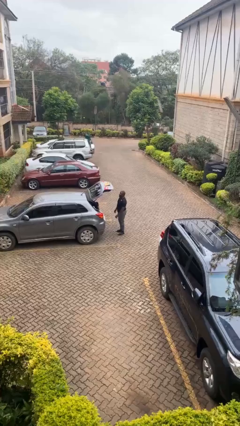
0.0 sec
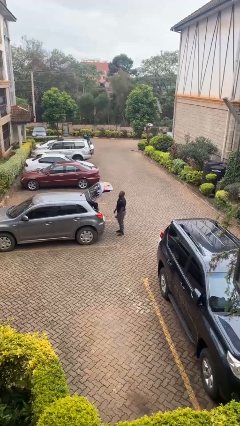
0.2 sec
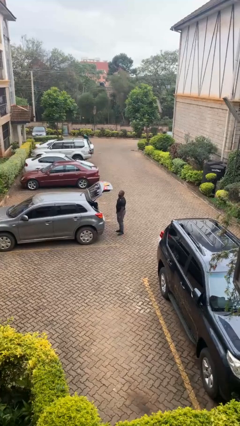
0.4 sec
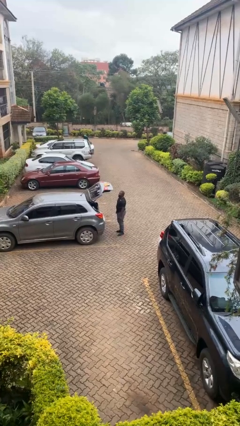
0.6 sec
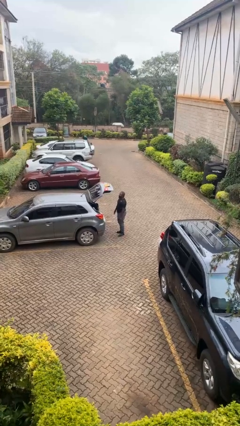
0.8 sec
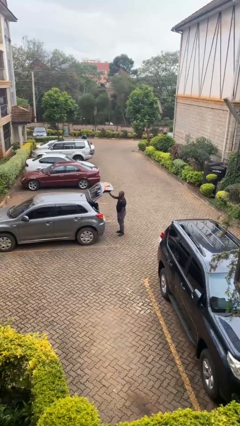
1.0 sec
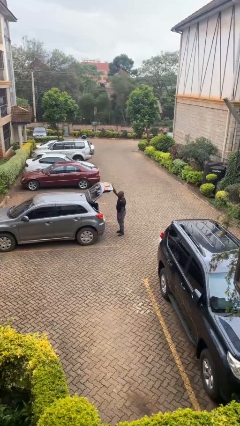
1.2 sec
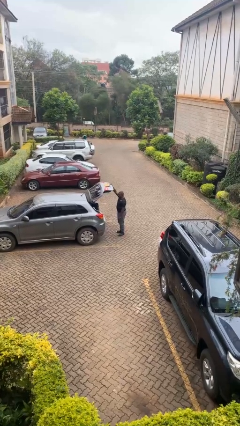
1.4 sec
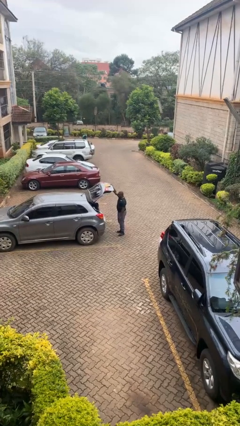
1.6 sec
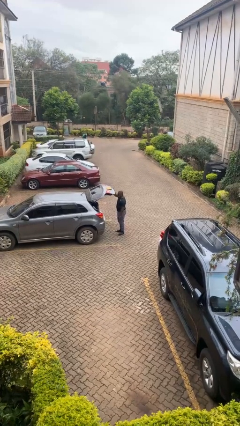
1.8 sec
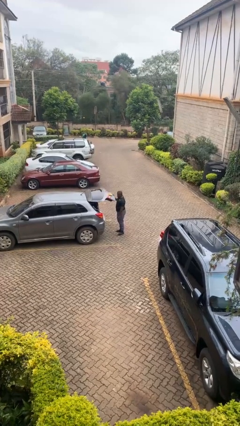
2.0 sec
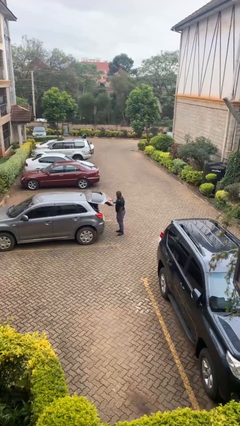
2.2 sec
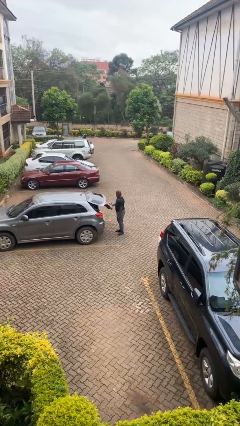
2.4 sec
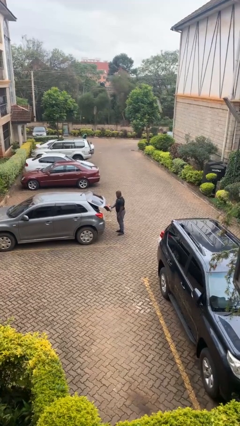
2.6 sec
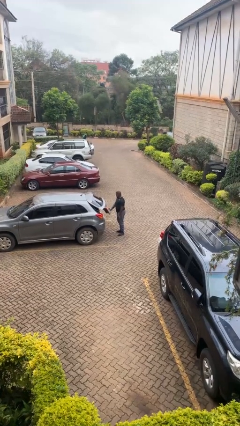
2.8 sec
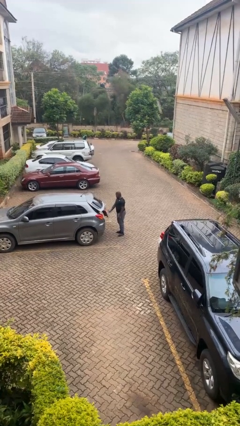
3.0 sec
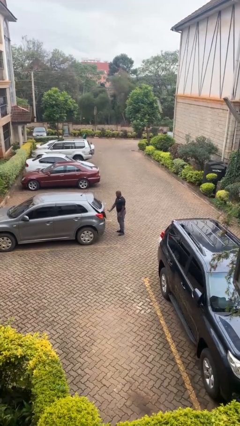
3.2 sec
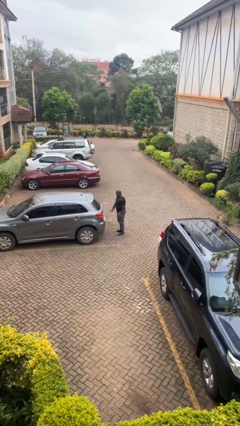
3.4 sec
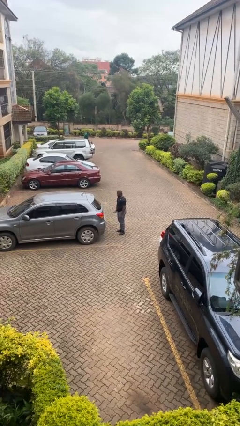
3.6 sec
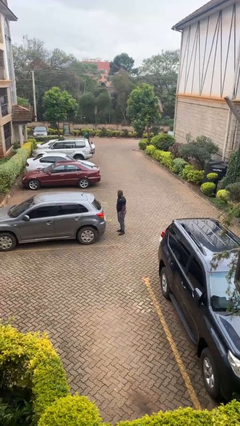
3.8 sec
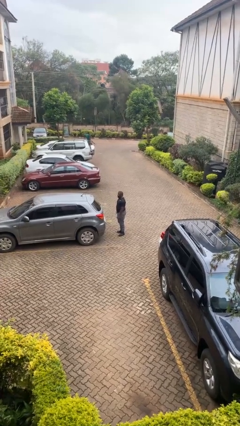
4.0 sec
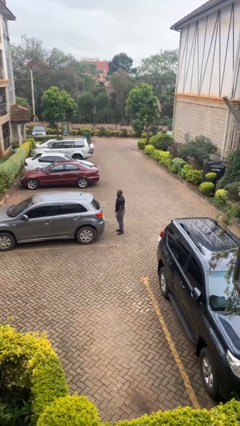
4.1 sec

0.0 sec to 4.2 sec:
person closes car trunk

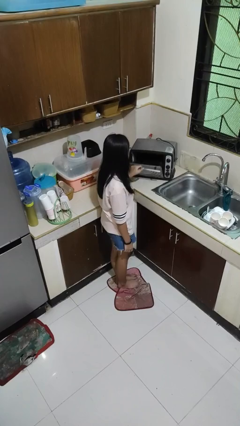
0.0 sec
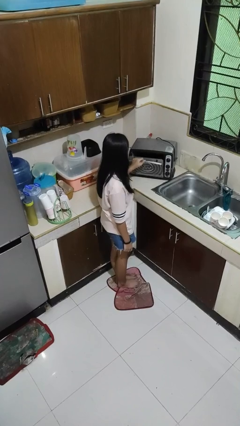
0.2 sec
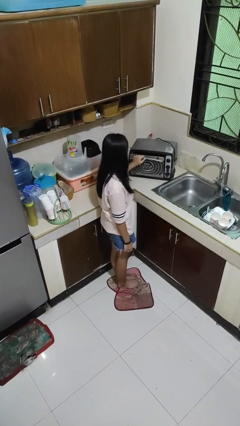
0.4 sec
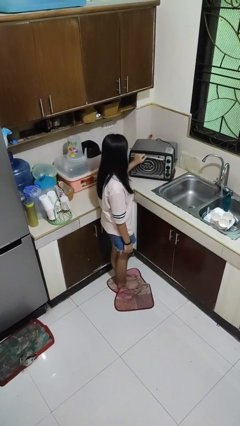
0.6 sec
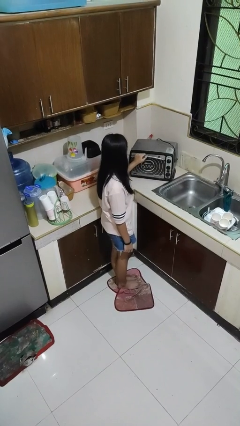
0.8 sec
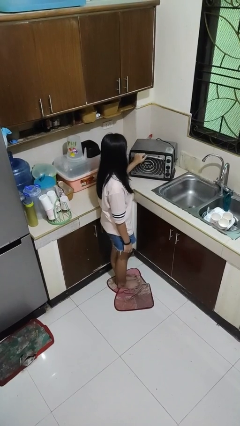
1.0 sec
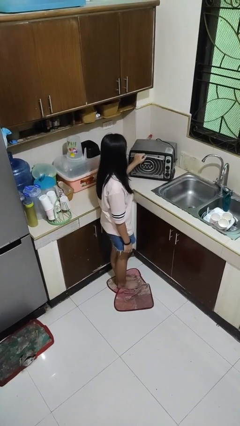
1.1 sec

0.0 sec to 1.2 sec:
person closes microwave

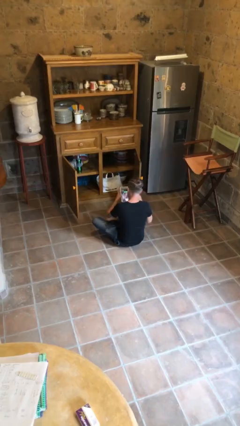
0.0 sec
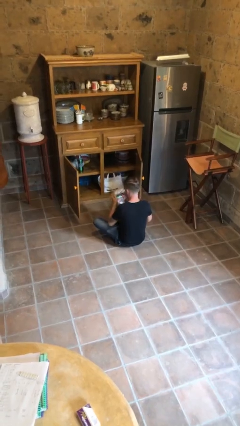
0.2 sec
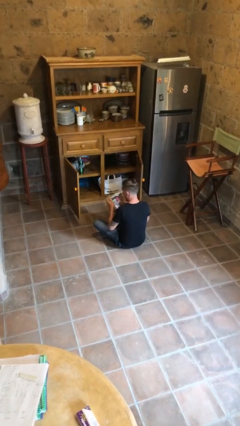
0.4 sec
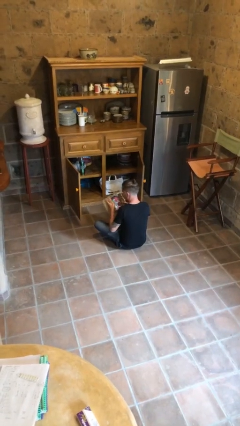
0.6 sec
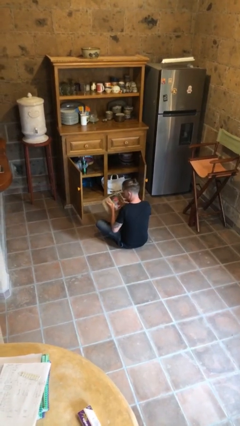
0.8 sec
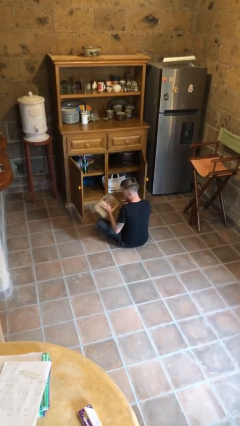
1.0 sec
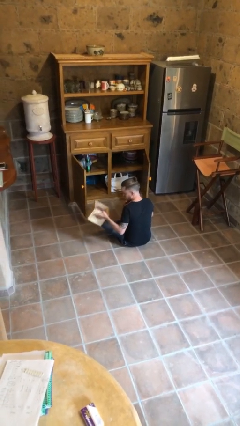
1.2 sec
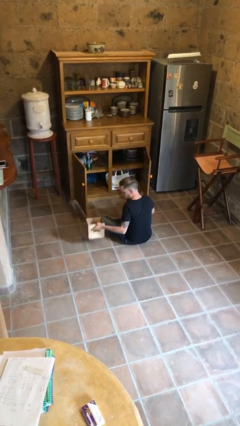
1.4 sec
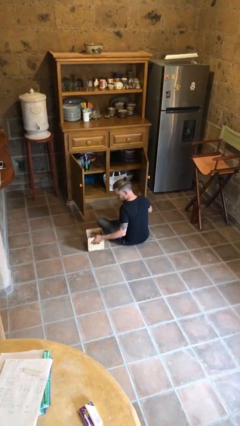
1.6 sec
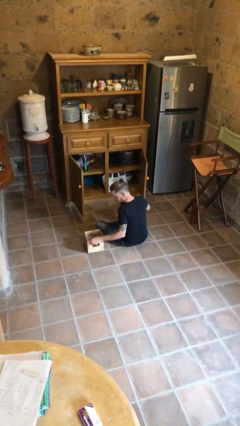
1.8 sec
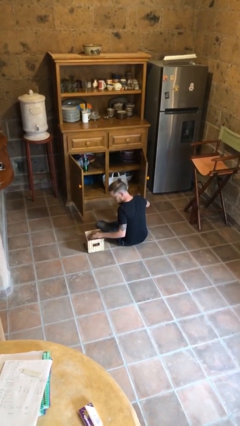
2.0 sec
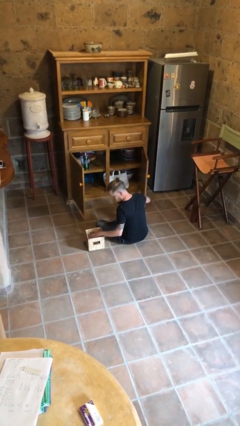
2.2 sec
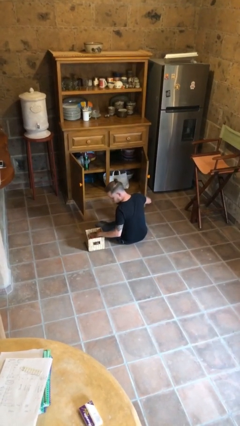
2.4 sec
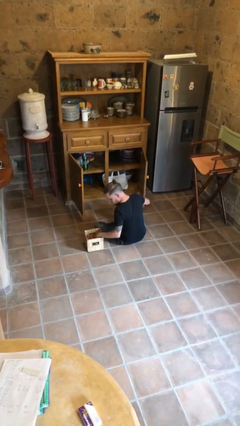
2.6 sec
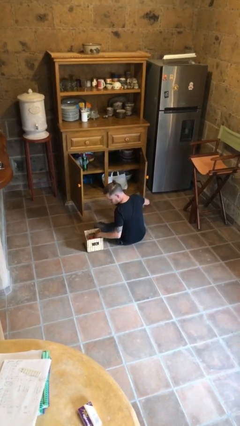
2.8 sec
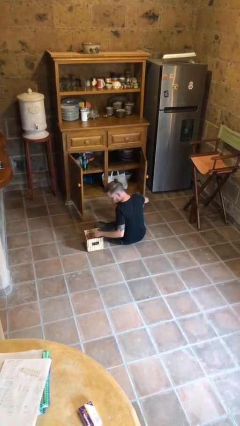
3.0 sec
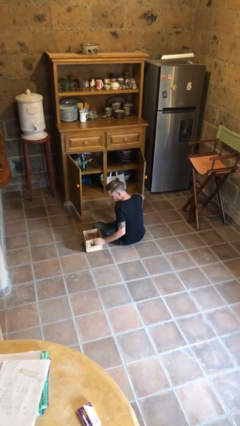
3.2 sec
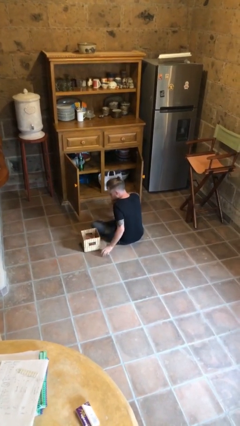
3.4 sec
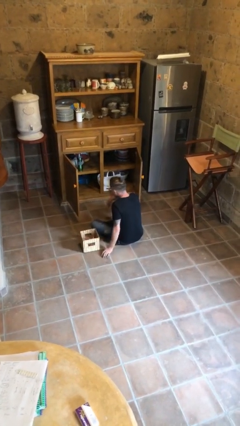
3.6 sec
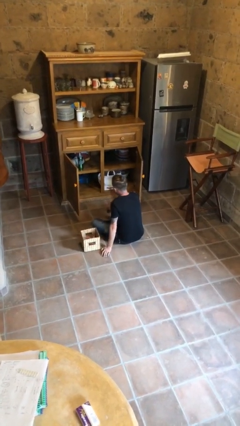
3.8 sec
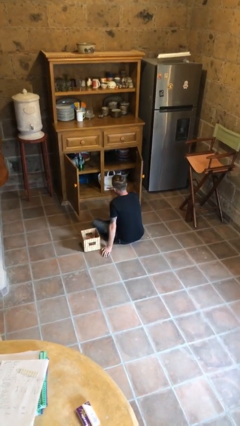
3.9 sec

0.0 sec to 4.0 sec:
person puts down object on floor

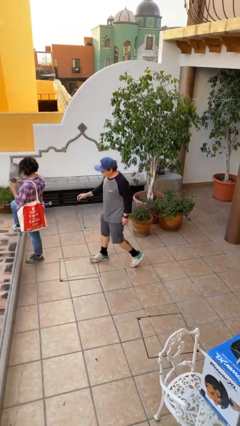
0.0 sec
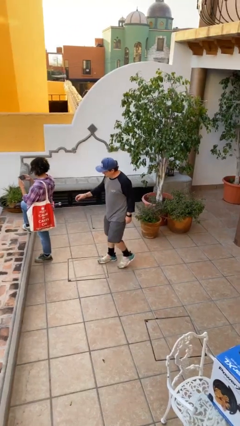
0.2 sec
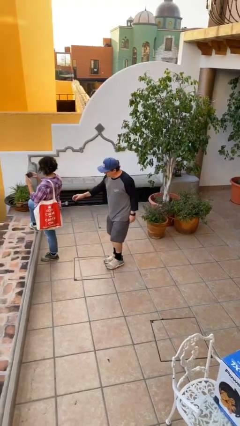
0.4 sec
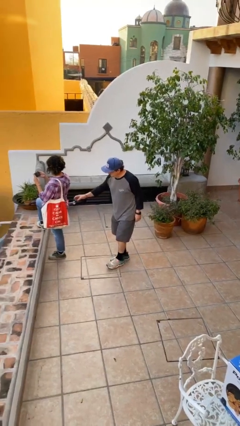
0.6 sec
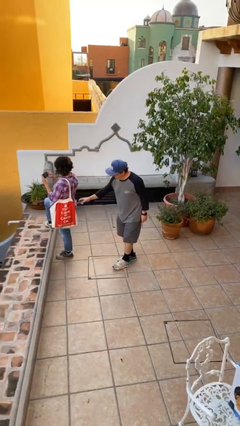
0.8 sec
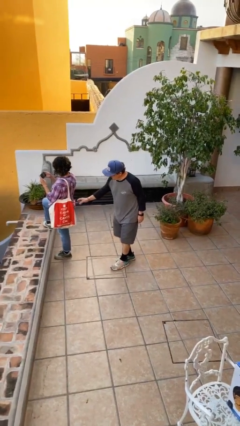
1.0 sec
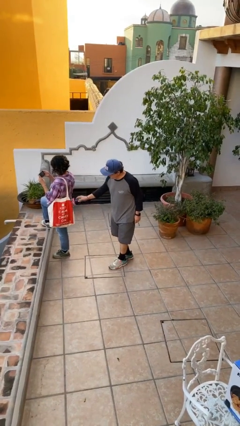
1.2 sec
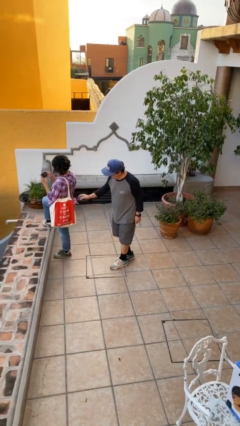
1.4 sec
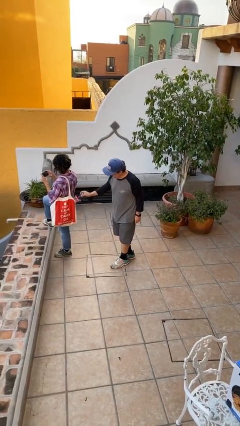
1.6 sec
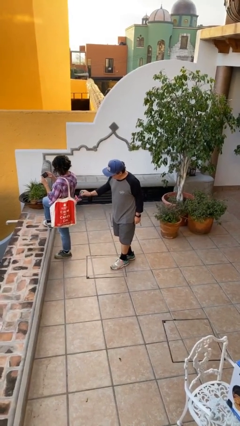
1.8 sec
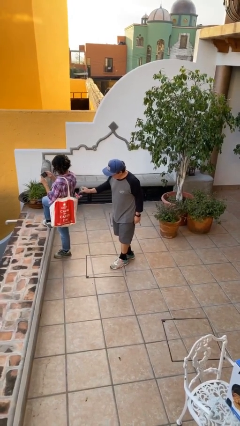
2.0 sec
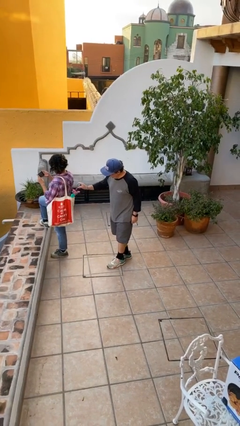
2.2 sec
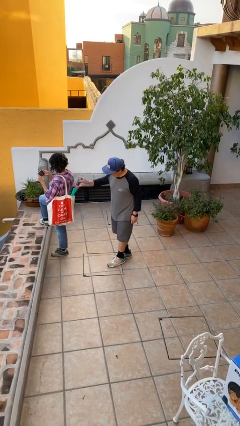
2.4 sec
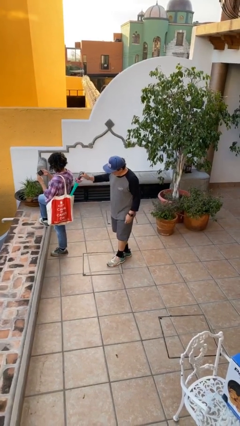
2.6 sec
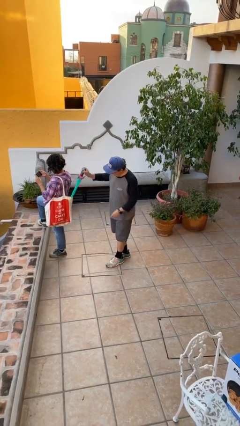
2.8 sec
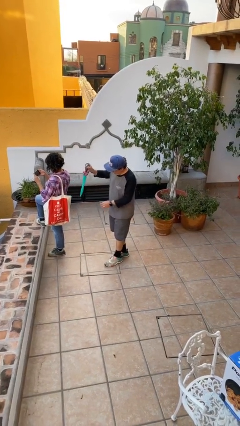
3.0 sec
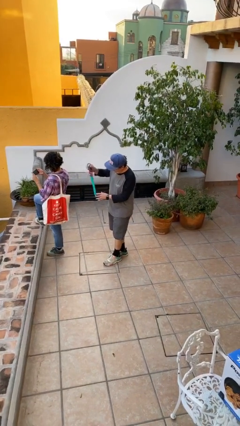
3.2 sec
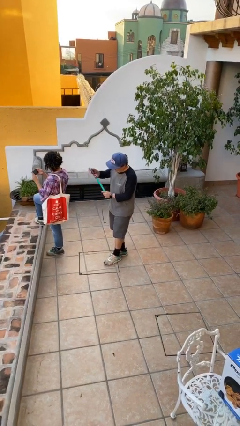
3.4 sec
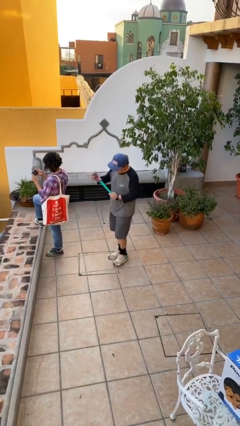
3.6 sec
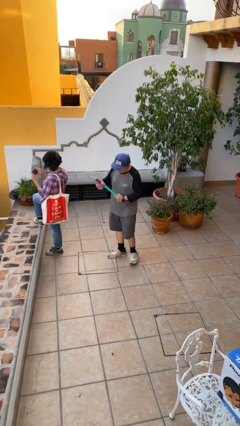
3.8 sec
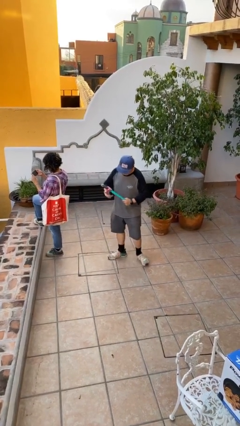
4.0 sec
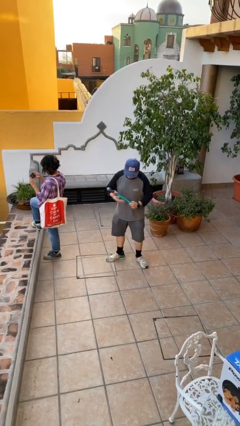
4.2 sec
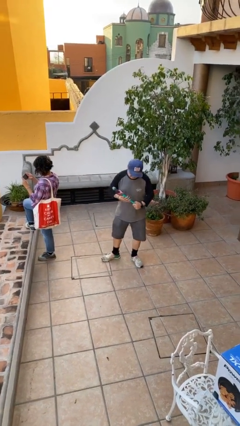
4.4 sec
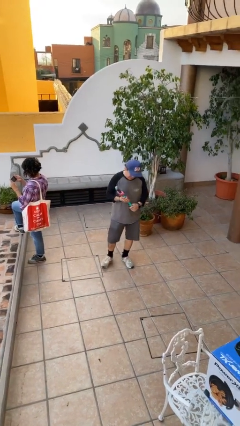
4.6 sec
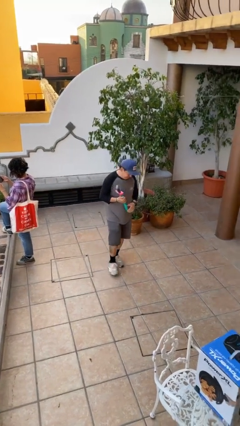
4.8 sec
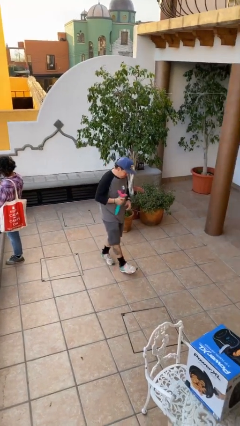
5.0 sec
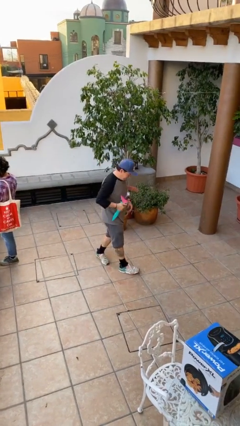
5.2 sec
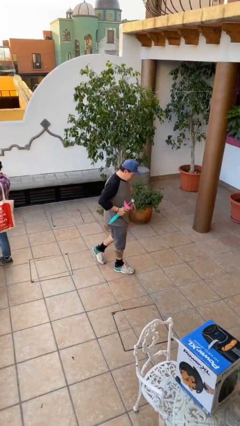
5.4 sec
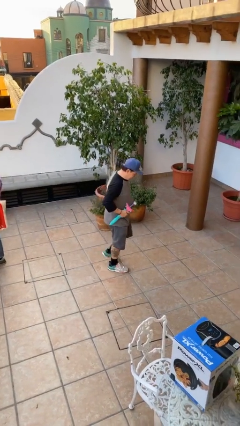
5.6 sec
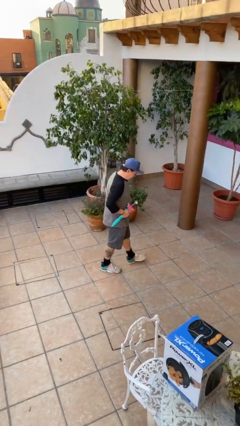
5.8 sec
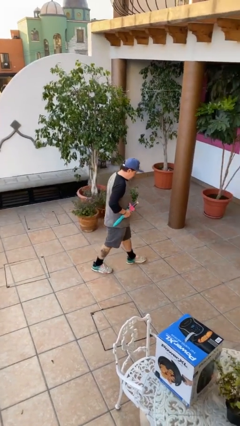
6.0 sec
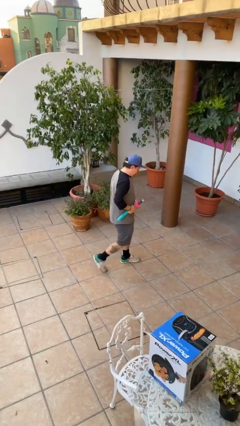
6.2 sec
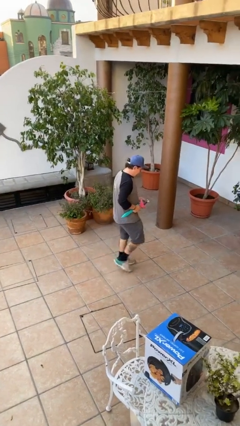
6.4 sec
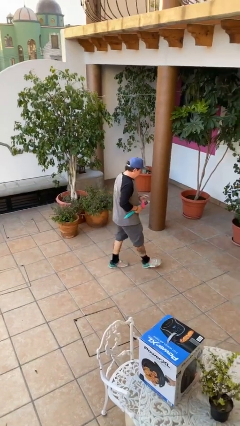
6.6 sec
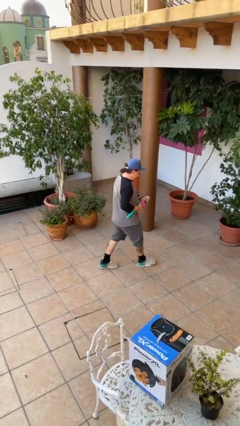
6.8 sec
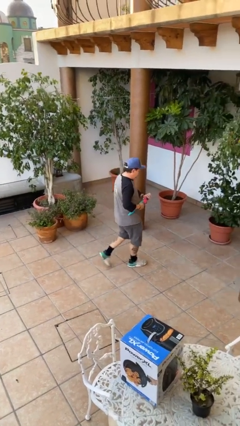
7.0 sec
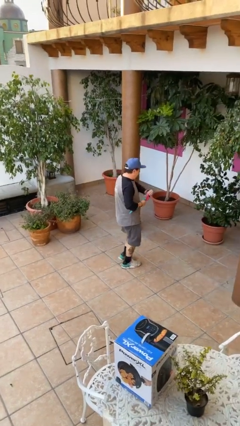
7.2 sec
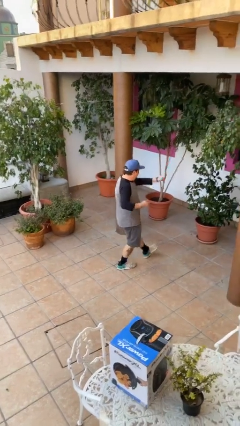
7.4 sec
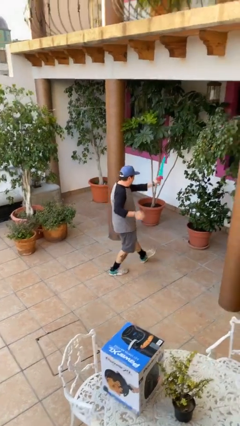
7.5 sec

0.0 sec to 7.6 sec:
person steals object from person

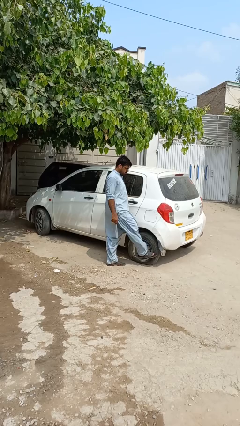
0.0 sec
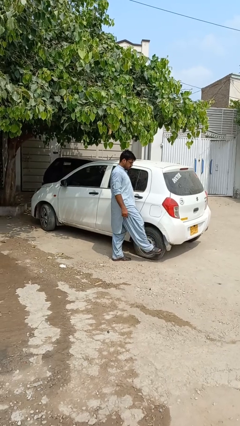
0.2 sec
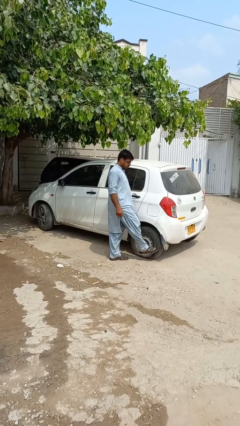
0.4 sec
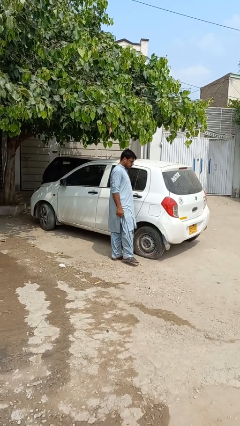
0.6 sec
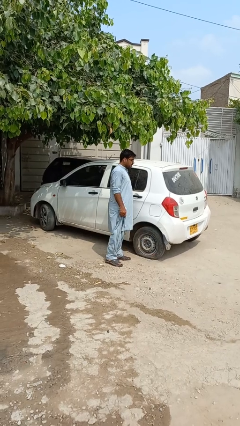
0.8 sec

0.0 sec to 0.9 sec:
person kicks car tires
